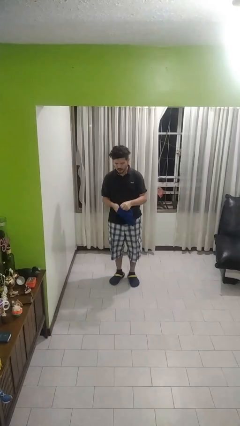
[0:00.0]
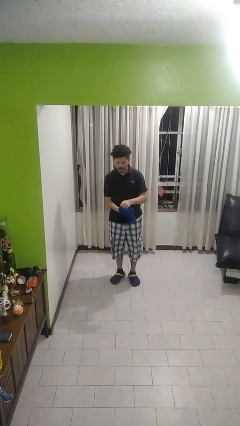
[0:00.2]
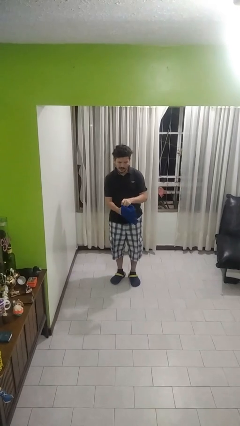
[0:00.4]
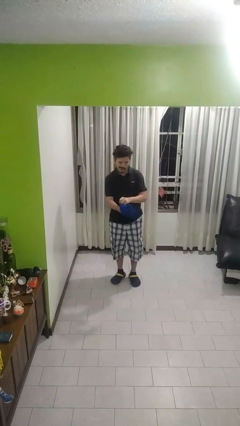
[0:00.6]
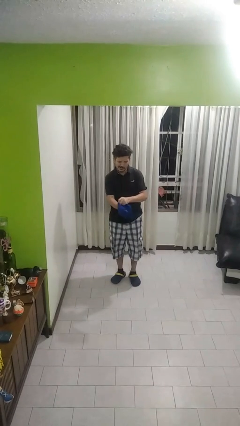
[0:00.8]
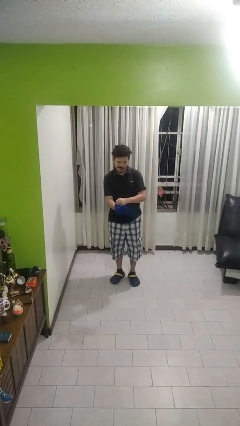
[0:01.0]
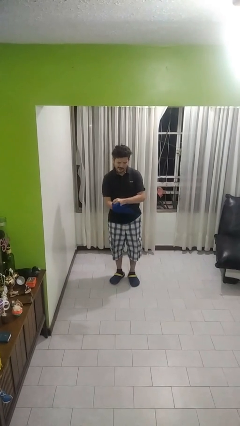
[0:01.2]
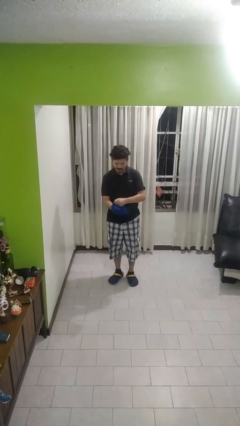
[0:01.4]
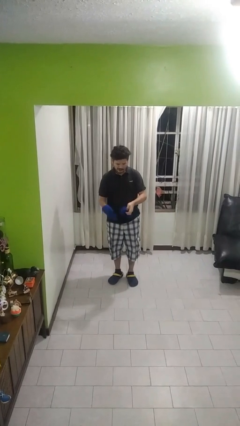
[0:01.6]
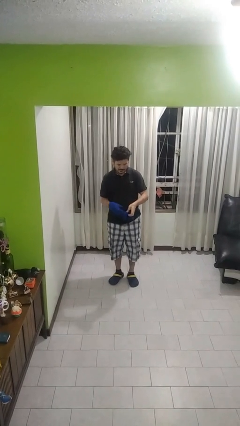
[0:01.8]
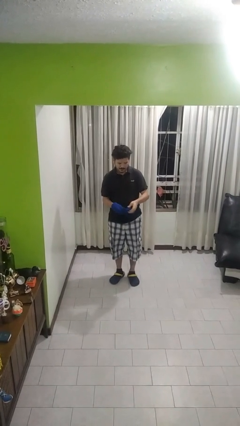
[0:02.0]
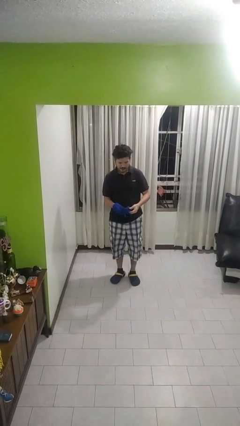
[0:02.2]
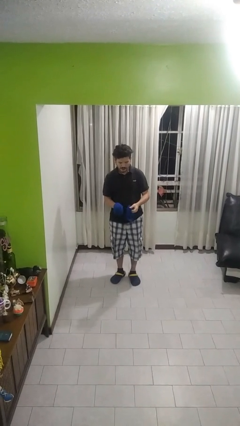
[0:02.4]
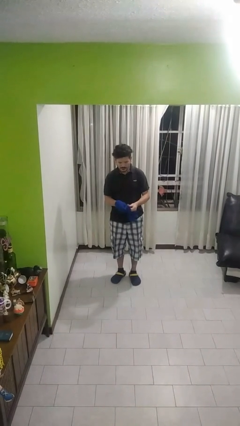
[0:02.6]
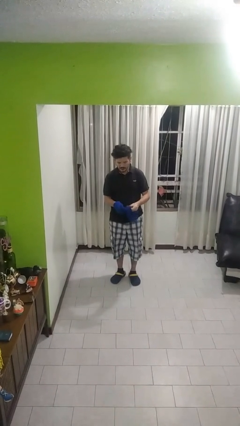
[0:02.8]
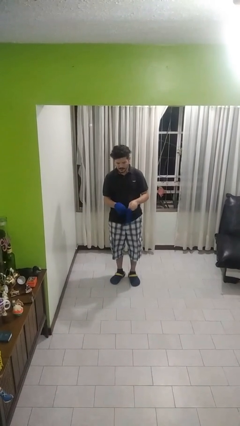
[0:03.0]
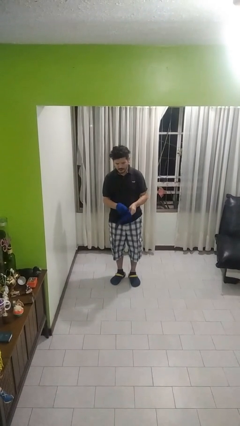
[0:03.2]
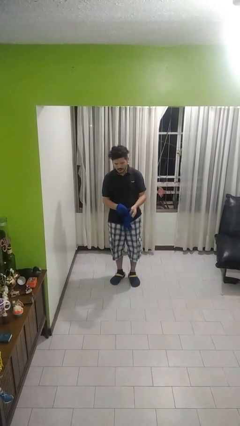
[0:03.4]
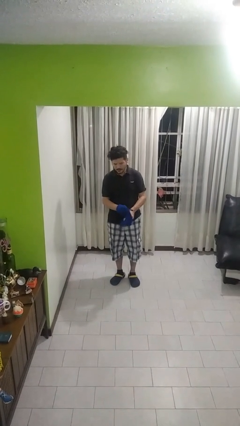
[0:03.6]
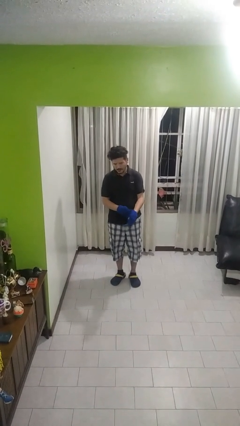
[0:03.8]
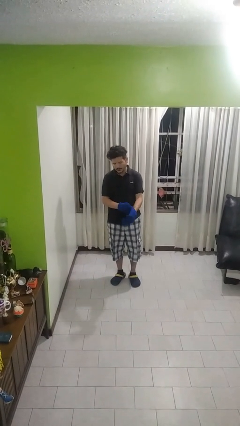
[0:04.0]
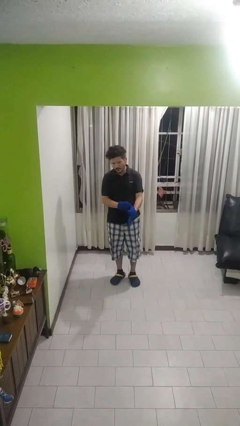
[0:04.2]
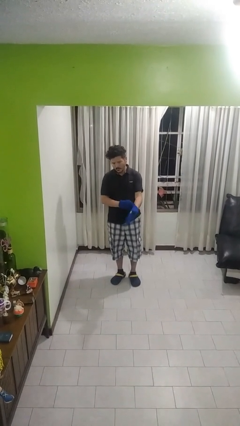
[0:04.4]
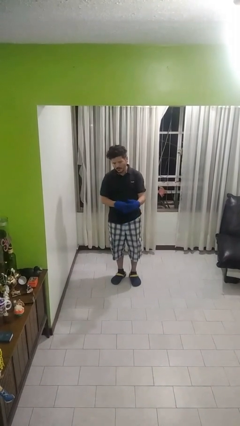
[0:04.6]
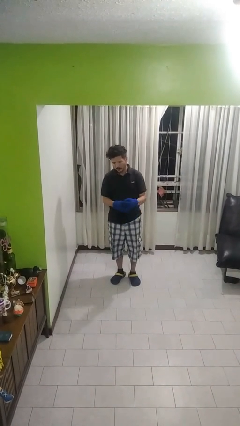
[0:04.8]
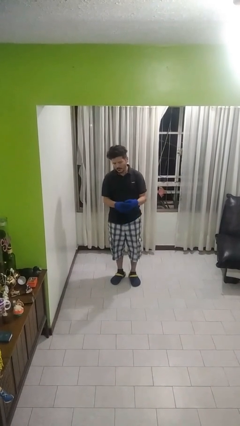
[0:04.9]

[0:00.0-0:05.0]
person puts on gloves

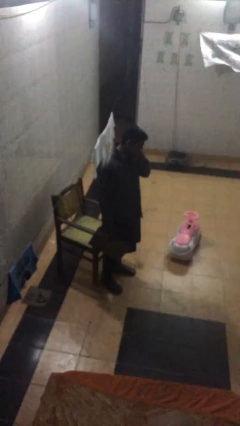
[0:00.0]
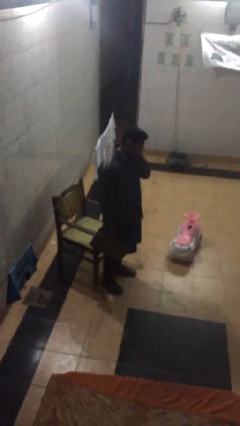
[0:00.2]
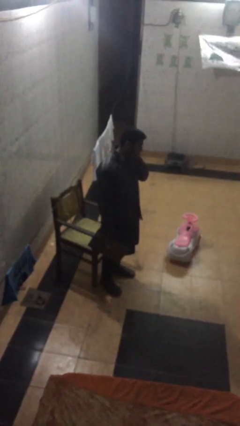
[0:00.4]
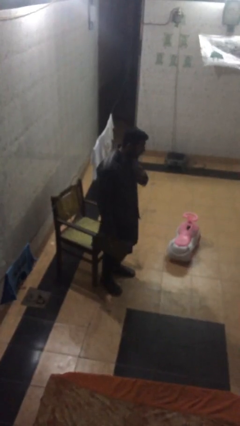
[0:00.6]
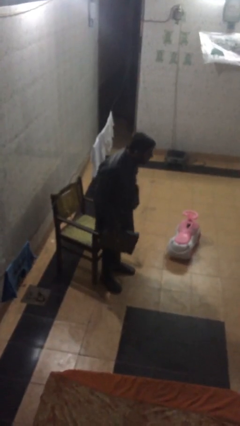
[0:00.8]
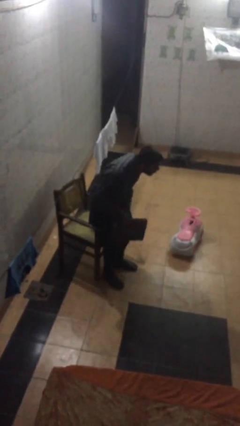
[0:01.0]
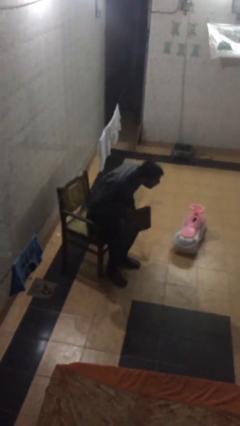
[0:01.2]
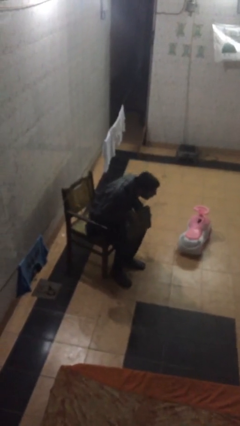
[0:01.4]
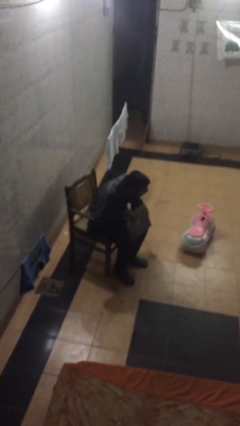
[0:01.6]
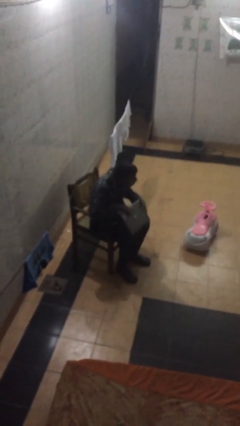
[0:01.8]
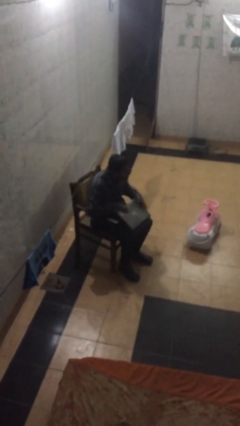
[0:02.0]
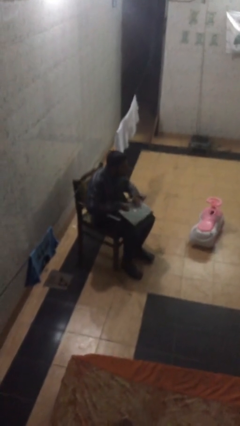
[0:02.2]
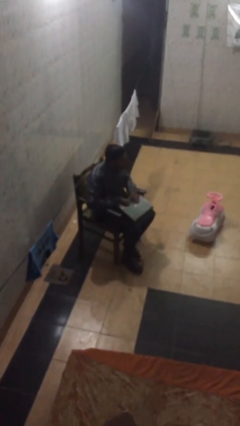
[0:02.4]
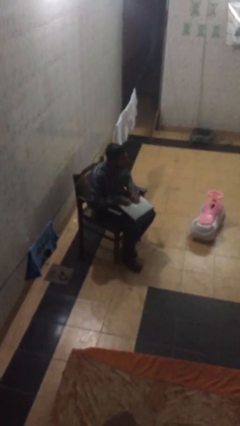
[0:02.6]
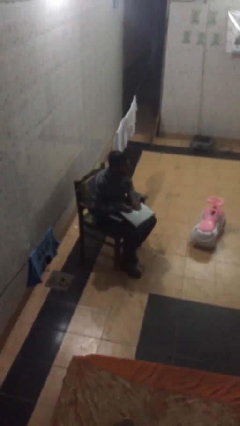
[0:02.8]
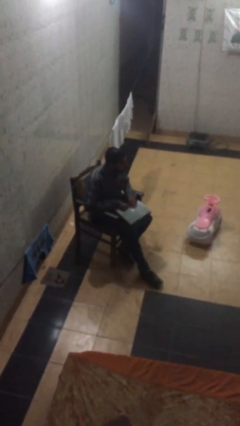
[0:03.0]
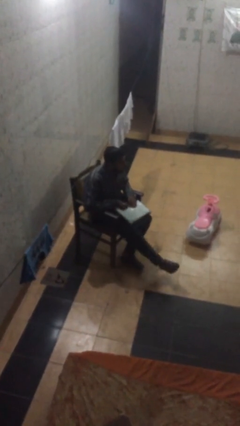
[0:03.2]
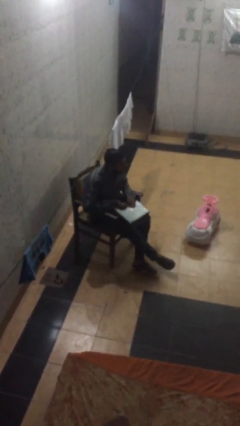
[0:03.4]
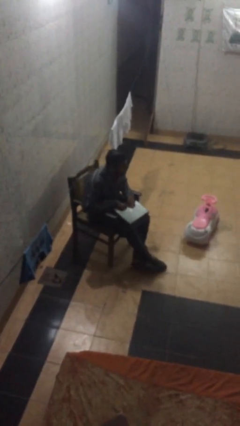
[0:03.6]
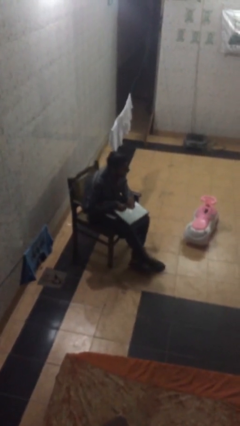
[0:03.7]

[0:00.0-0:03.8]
person sits down

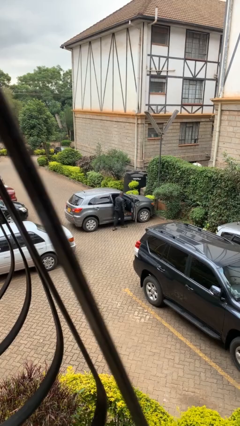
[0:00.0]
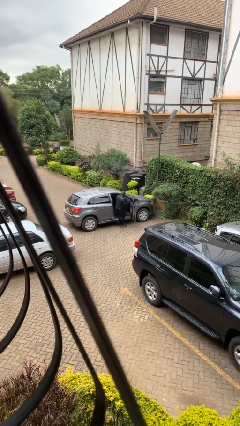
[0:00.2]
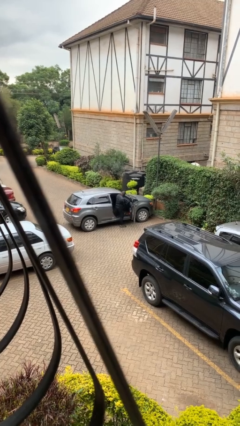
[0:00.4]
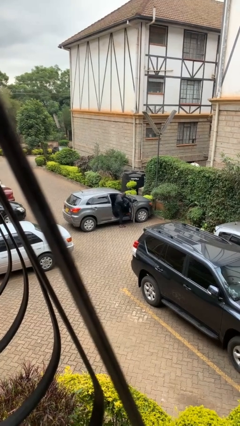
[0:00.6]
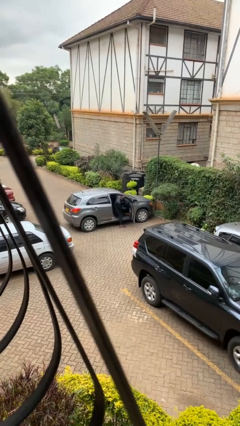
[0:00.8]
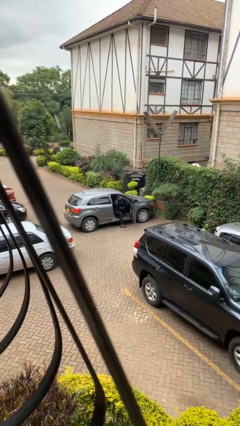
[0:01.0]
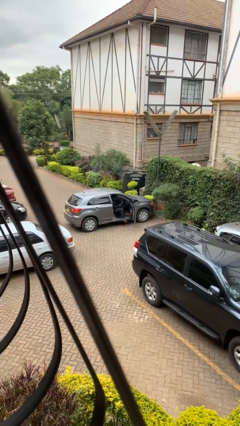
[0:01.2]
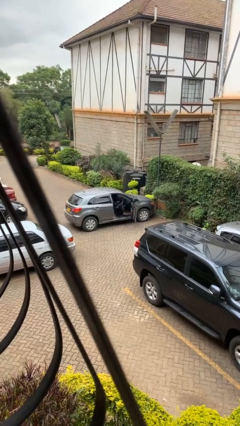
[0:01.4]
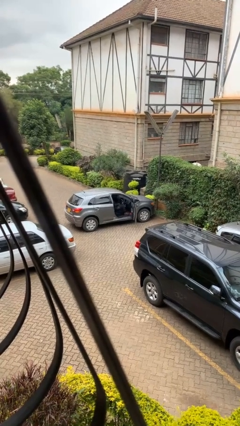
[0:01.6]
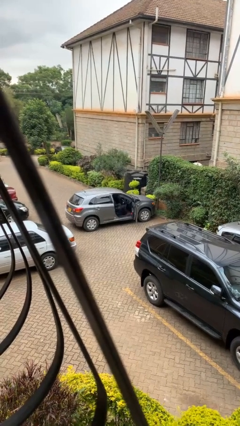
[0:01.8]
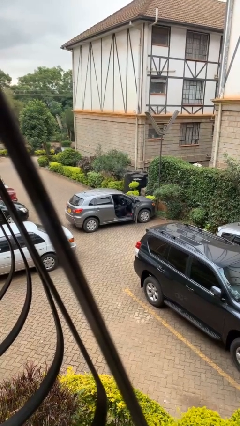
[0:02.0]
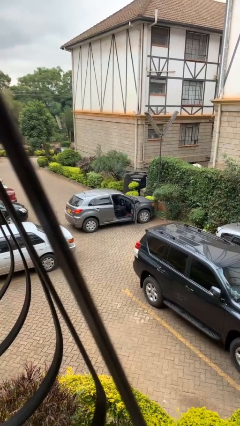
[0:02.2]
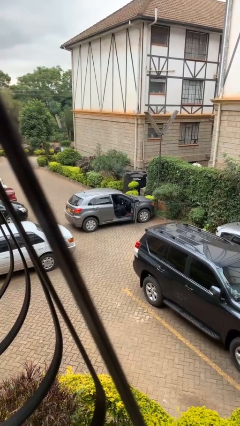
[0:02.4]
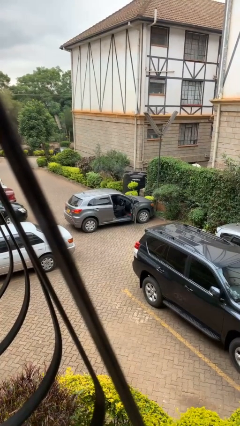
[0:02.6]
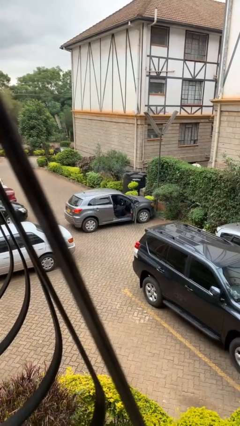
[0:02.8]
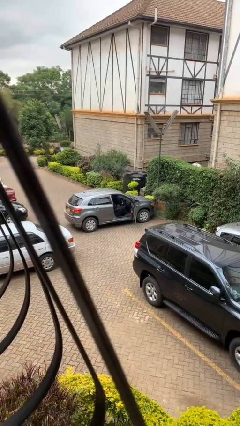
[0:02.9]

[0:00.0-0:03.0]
person enters car

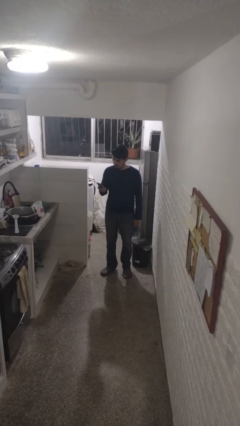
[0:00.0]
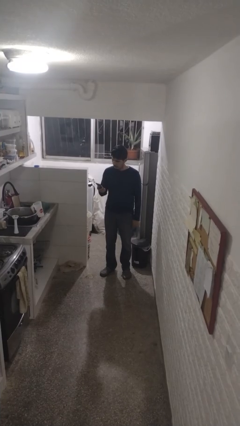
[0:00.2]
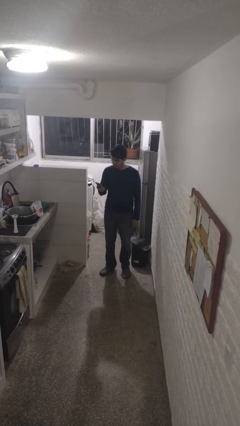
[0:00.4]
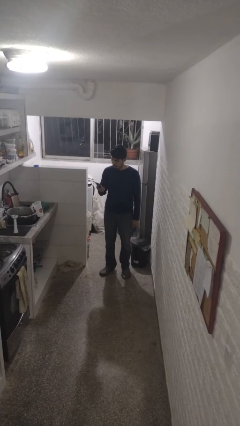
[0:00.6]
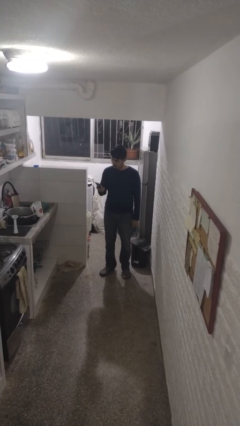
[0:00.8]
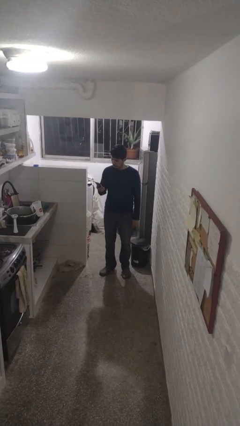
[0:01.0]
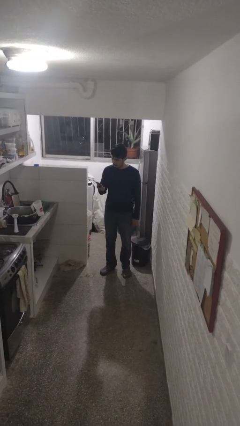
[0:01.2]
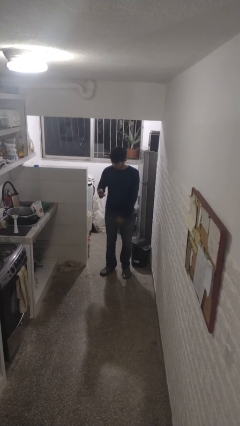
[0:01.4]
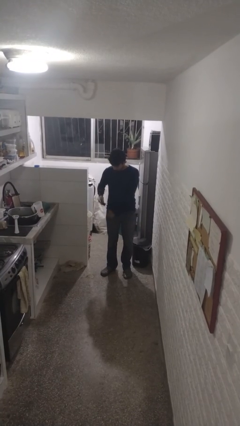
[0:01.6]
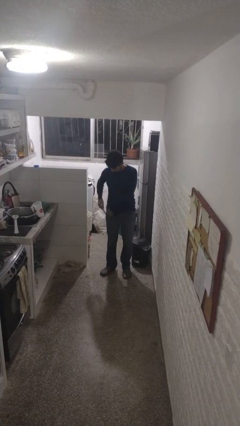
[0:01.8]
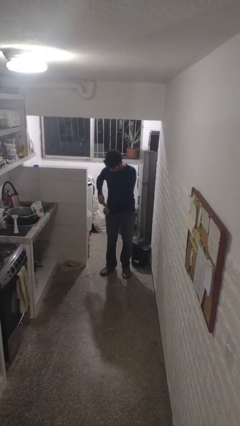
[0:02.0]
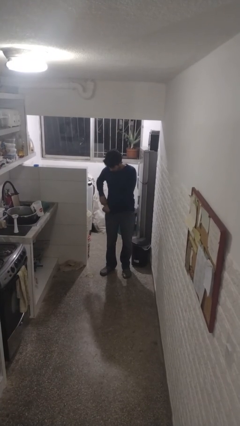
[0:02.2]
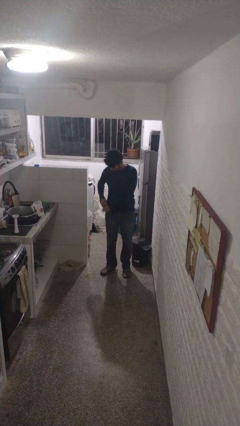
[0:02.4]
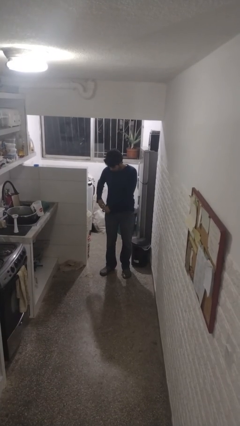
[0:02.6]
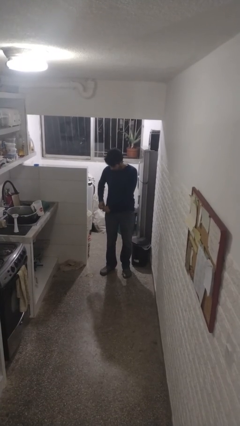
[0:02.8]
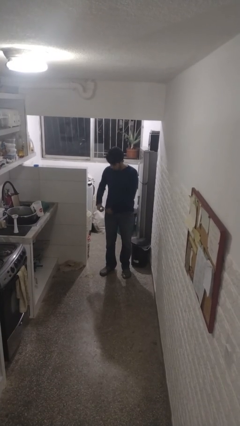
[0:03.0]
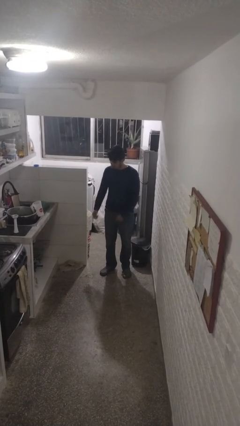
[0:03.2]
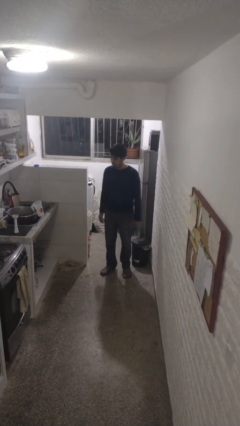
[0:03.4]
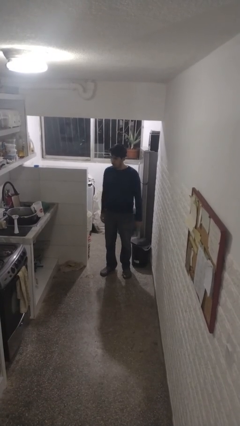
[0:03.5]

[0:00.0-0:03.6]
person puts phone into pocket

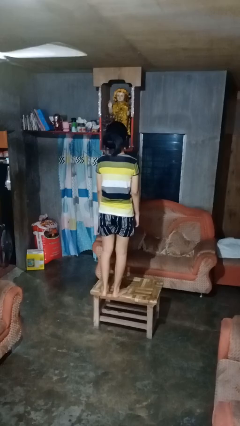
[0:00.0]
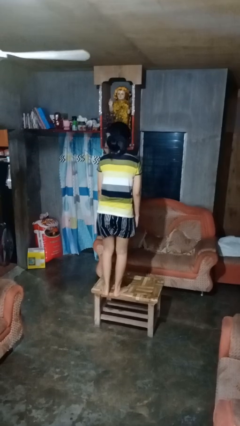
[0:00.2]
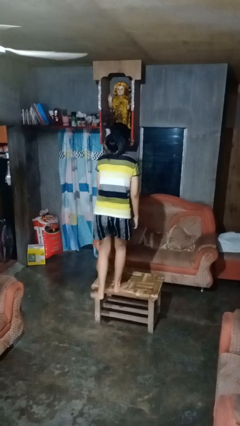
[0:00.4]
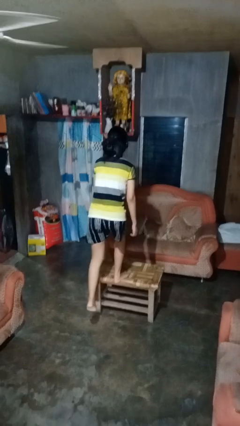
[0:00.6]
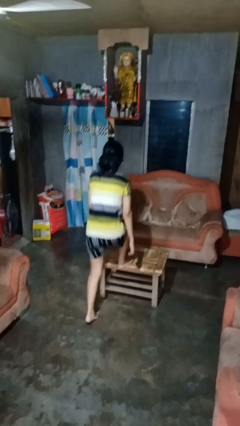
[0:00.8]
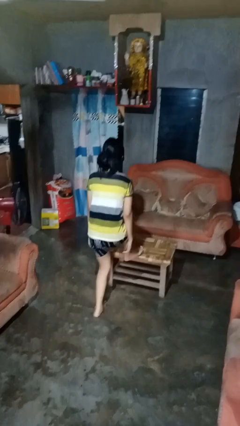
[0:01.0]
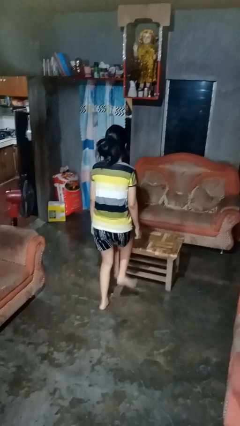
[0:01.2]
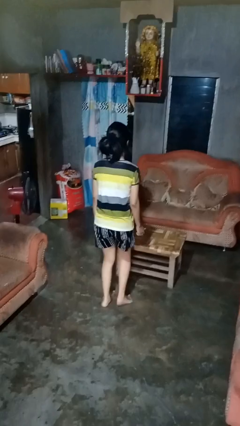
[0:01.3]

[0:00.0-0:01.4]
person climbs off table

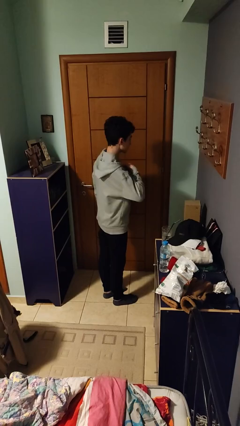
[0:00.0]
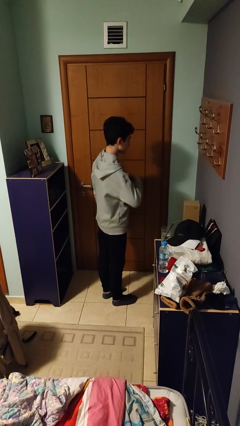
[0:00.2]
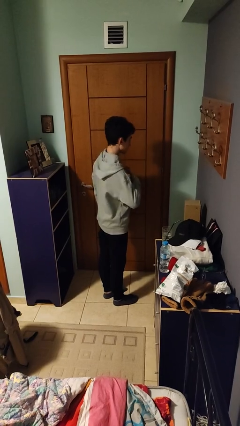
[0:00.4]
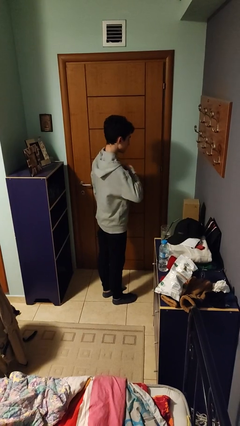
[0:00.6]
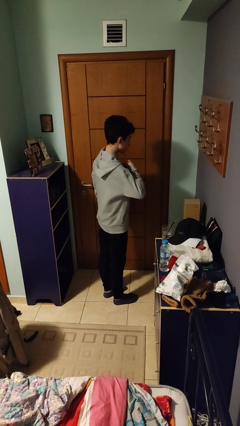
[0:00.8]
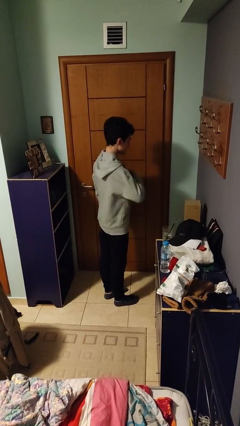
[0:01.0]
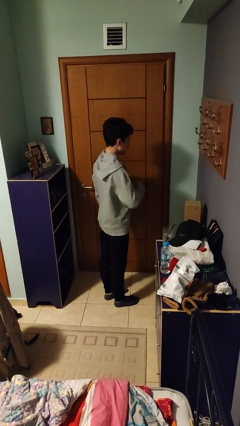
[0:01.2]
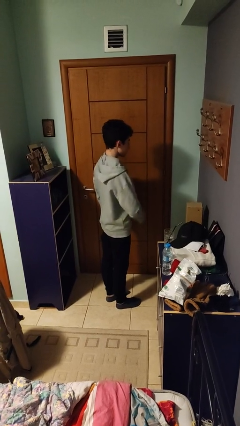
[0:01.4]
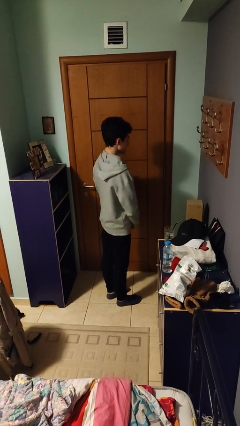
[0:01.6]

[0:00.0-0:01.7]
person unzips jacket
